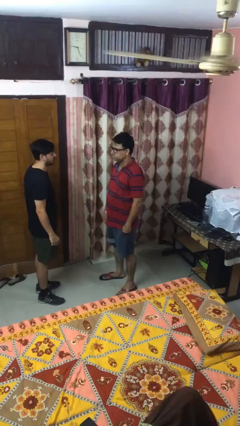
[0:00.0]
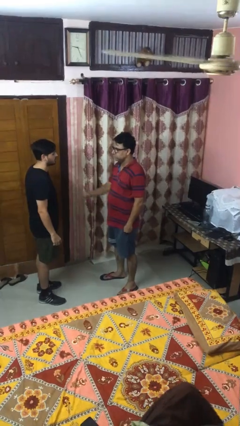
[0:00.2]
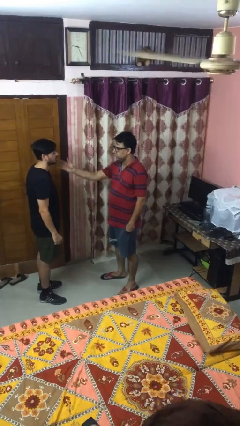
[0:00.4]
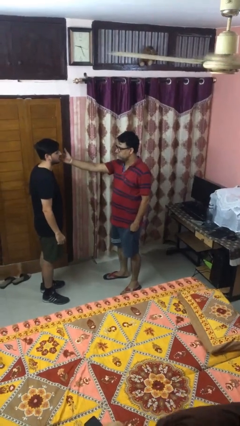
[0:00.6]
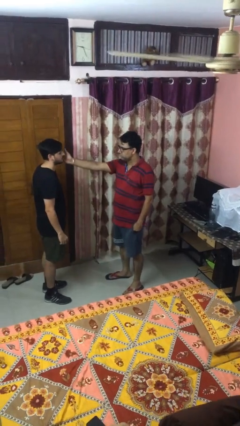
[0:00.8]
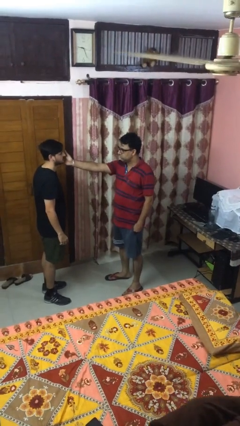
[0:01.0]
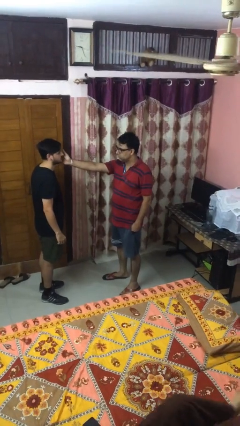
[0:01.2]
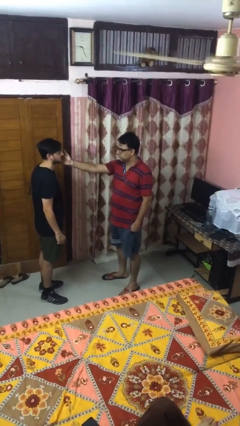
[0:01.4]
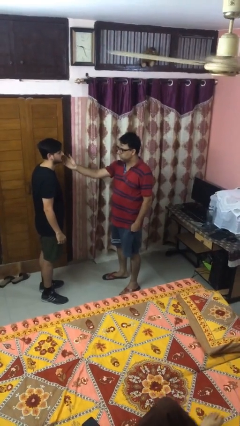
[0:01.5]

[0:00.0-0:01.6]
person touches face of person

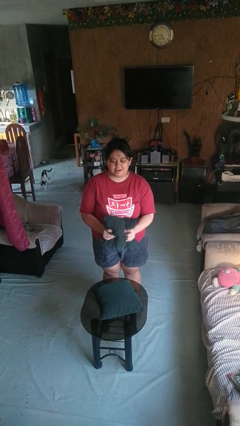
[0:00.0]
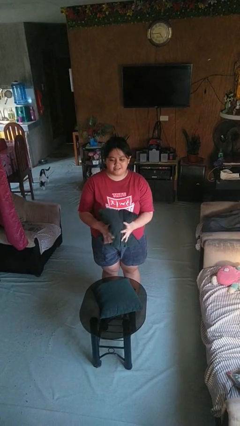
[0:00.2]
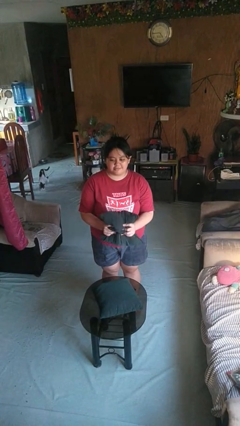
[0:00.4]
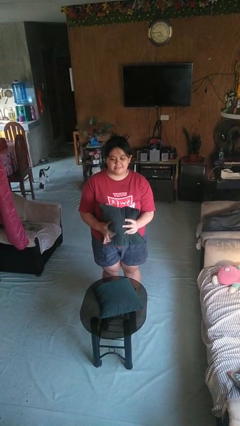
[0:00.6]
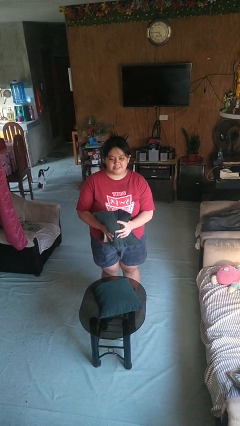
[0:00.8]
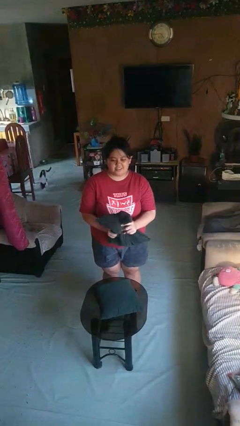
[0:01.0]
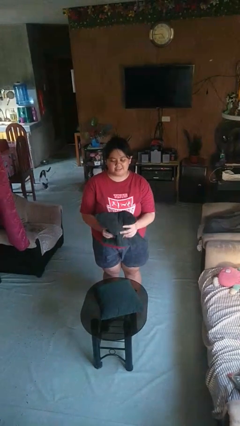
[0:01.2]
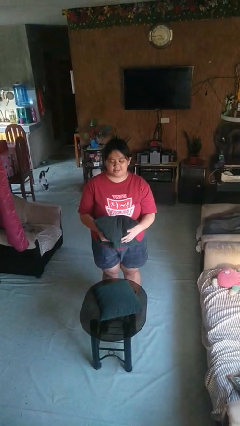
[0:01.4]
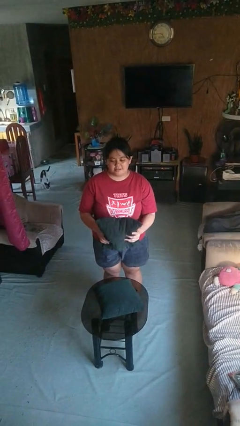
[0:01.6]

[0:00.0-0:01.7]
person squeezes object

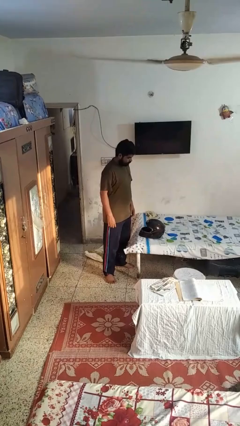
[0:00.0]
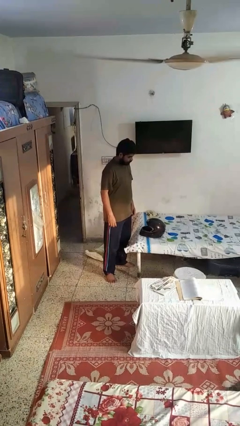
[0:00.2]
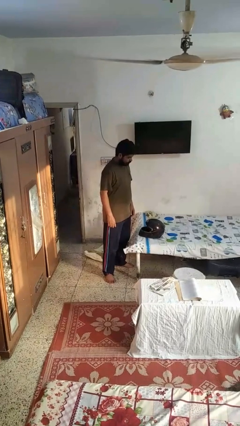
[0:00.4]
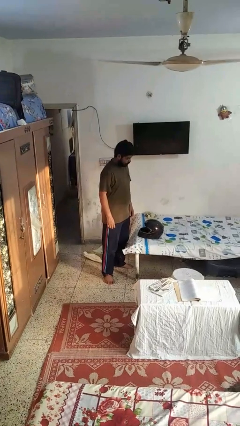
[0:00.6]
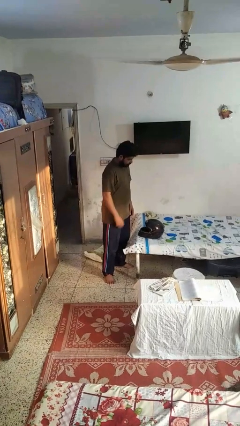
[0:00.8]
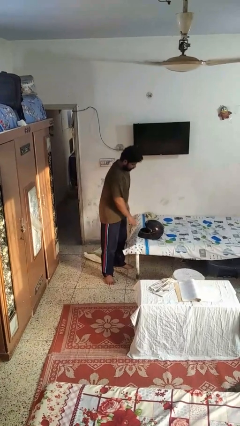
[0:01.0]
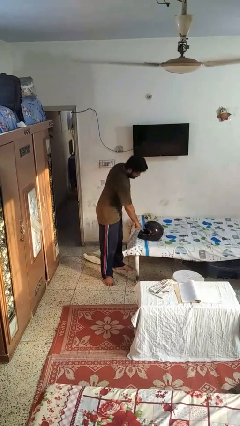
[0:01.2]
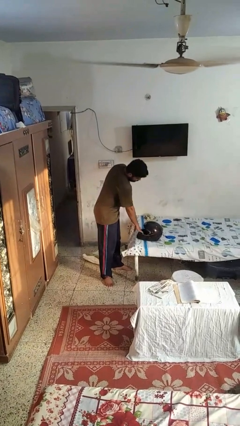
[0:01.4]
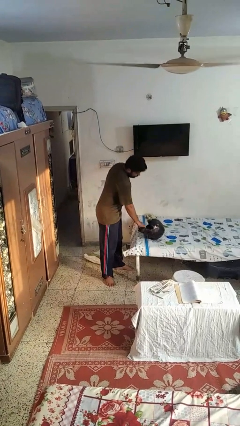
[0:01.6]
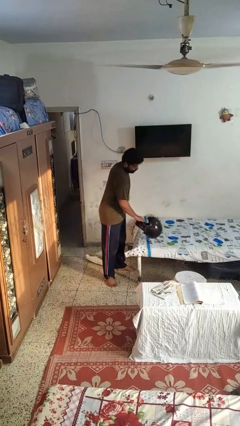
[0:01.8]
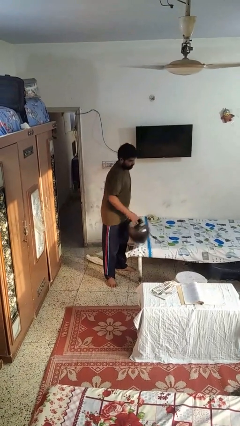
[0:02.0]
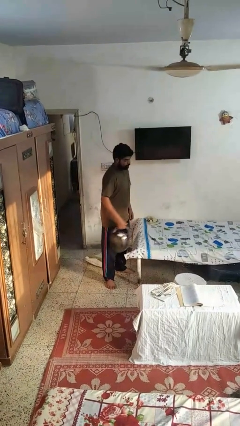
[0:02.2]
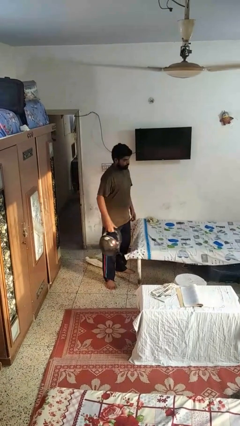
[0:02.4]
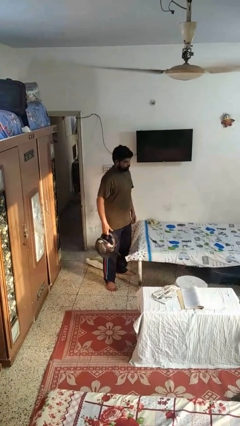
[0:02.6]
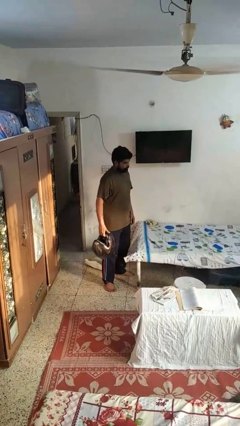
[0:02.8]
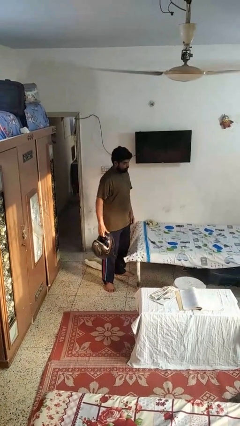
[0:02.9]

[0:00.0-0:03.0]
person picks up object from bed

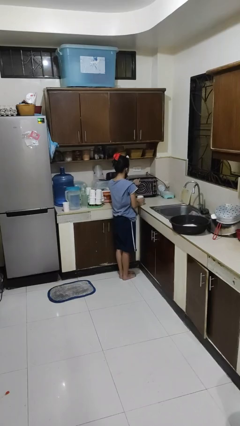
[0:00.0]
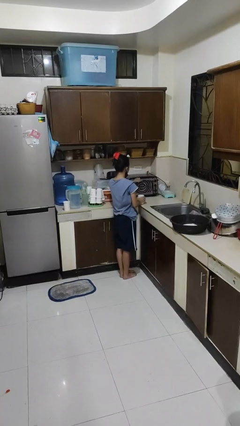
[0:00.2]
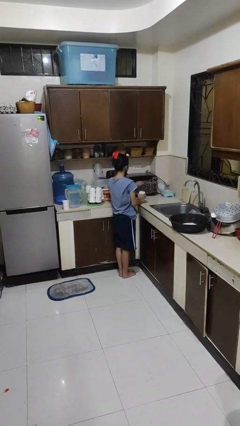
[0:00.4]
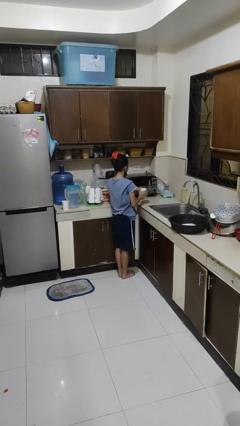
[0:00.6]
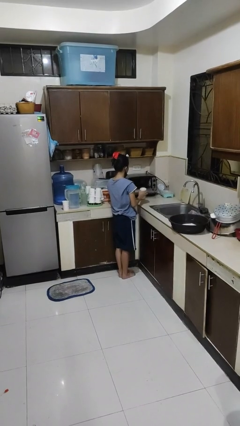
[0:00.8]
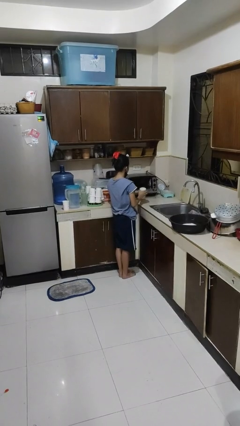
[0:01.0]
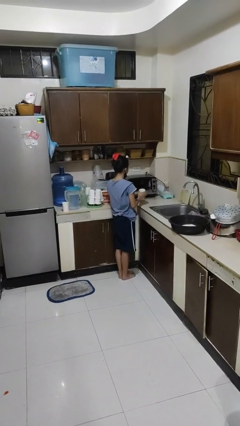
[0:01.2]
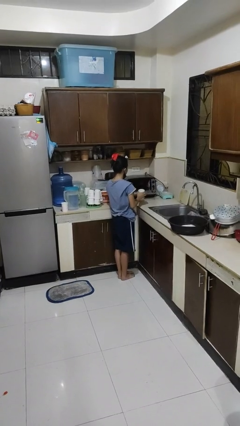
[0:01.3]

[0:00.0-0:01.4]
person opens microwave

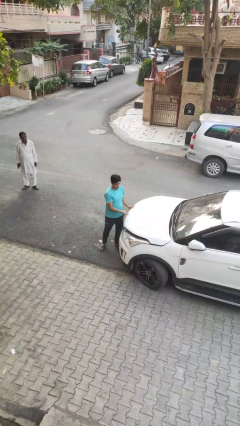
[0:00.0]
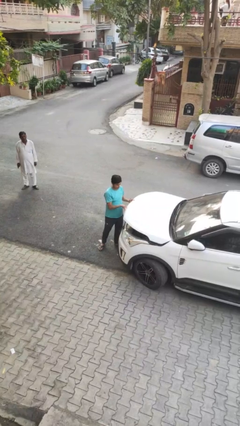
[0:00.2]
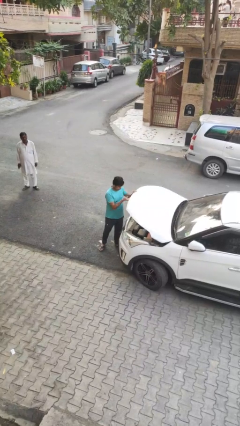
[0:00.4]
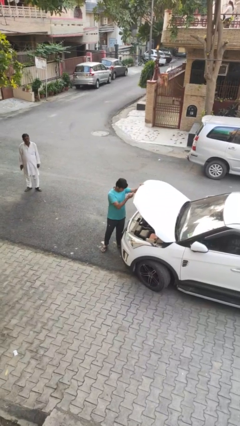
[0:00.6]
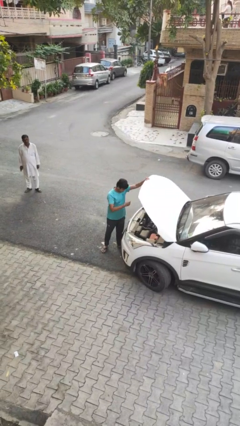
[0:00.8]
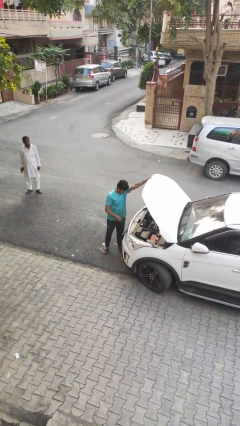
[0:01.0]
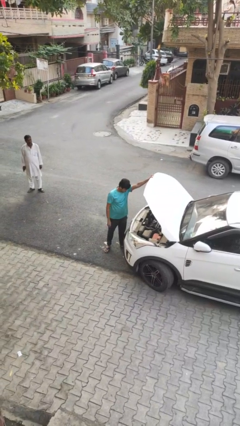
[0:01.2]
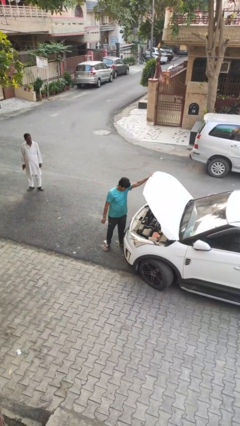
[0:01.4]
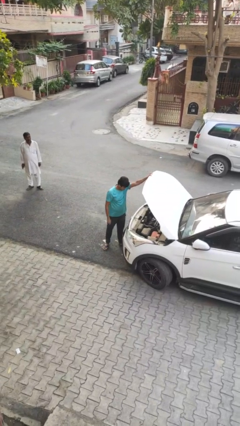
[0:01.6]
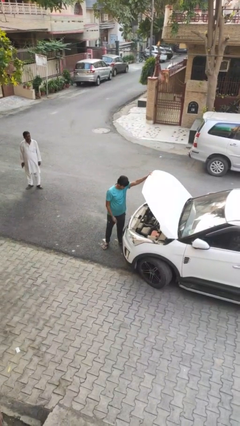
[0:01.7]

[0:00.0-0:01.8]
person opens car hood

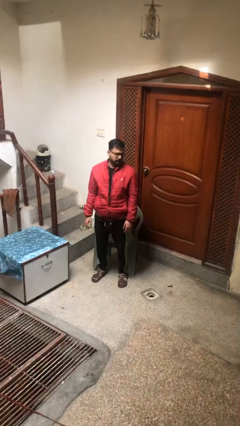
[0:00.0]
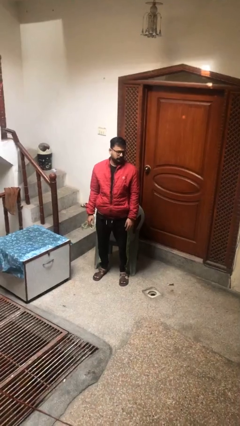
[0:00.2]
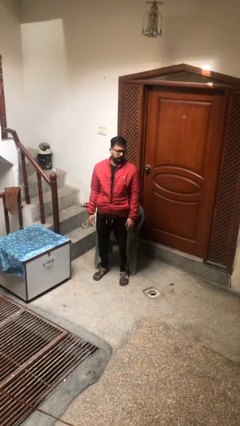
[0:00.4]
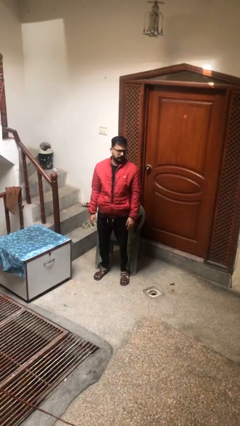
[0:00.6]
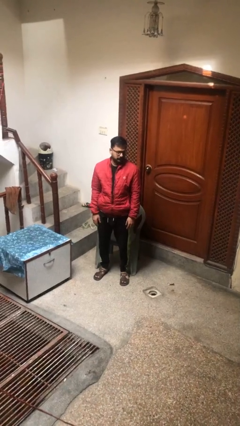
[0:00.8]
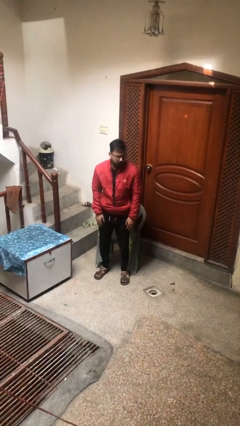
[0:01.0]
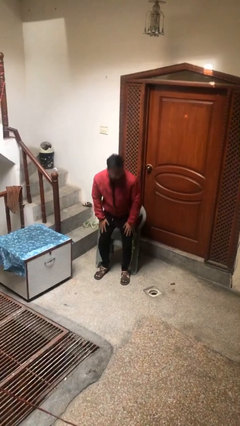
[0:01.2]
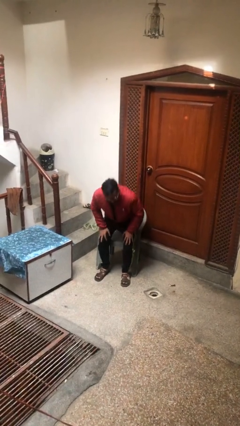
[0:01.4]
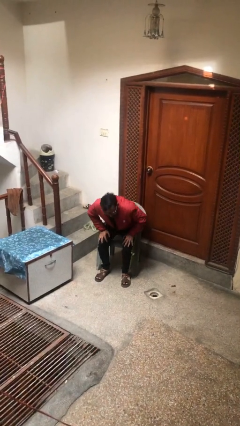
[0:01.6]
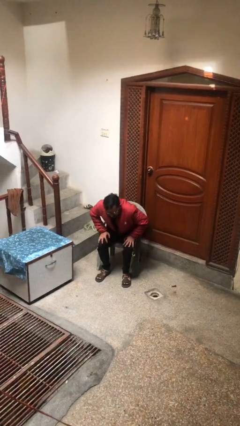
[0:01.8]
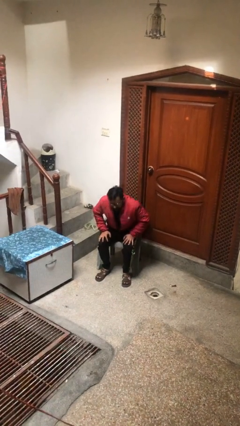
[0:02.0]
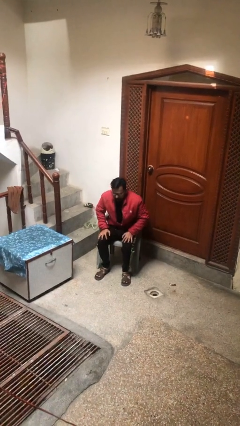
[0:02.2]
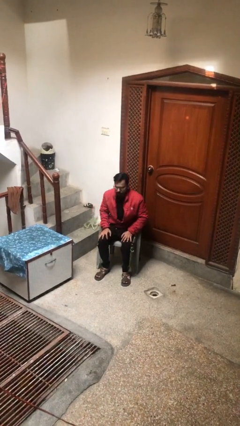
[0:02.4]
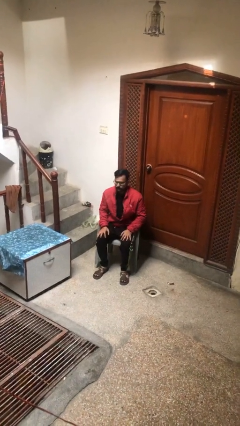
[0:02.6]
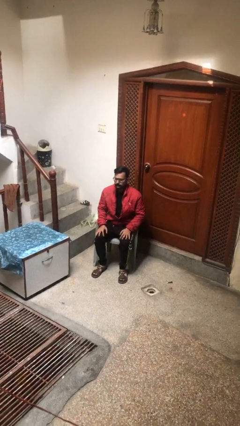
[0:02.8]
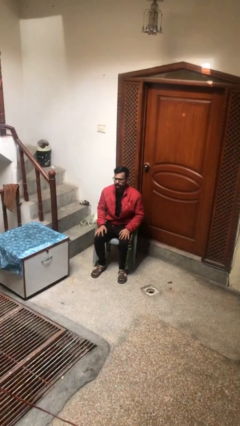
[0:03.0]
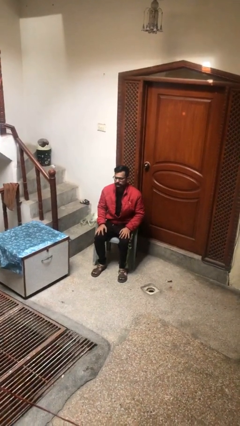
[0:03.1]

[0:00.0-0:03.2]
person sits down

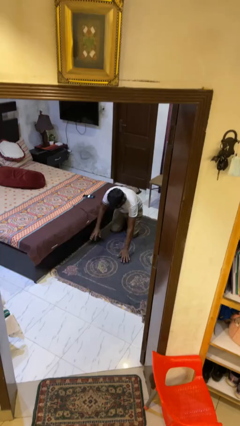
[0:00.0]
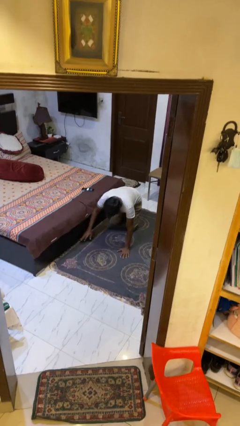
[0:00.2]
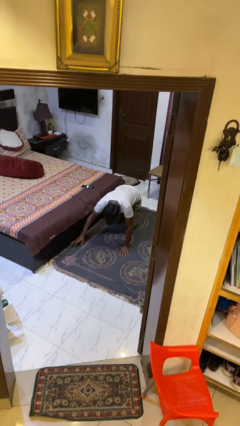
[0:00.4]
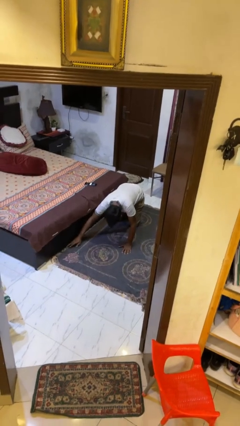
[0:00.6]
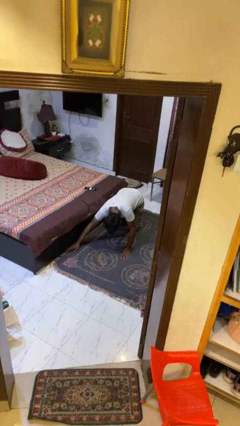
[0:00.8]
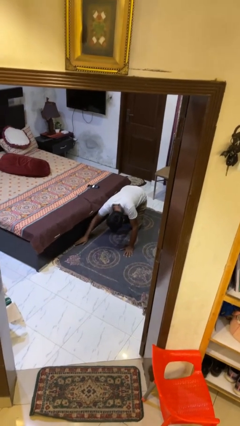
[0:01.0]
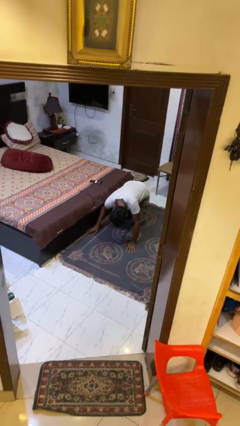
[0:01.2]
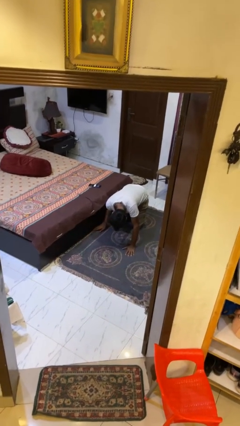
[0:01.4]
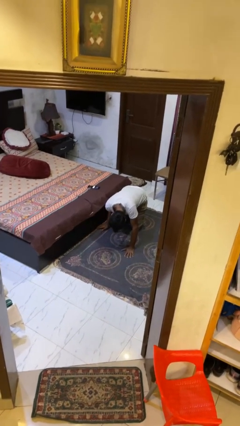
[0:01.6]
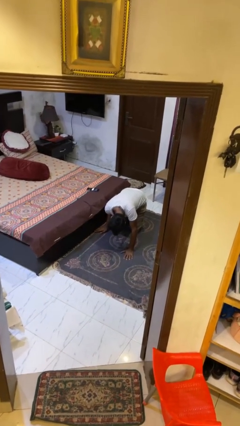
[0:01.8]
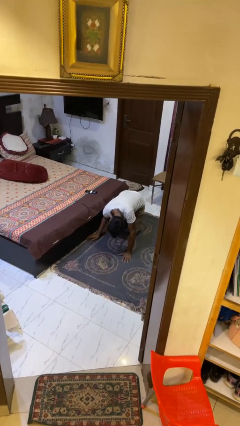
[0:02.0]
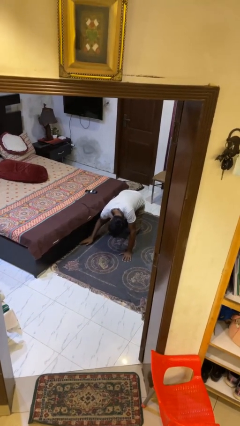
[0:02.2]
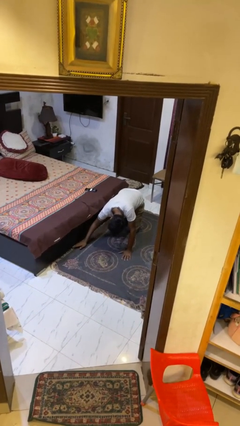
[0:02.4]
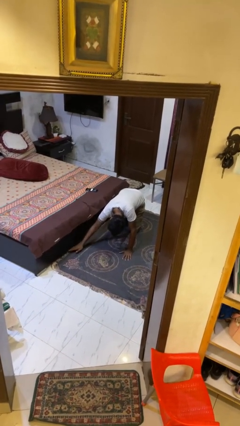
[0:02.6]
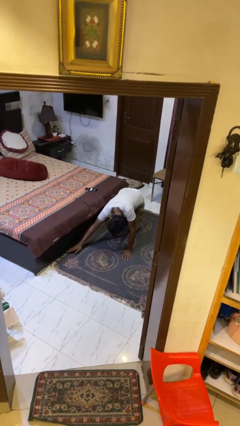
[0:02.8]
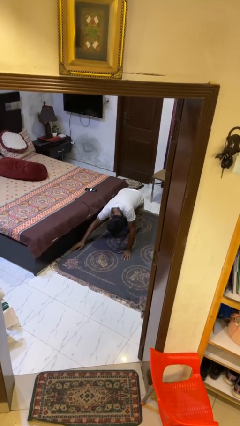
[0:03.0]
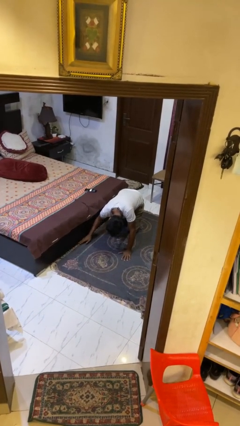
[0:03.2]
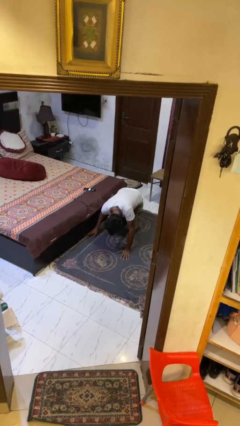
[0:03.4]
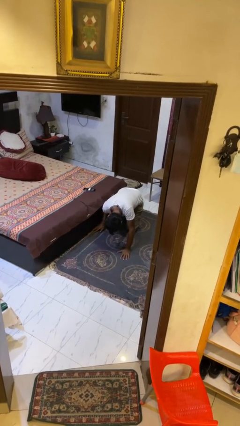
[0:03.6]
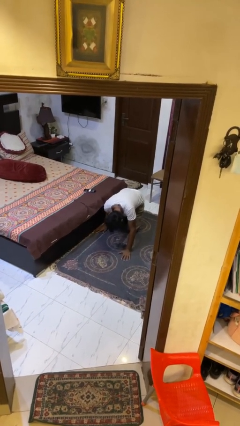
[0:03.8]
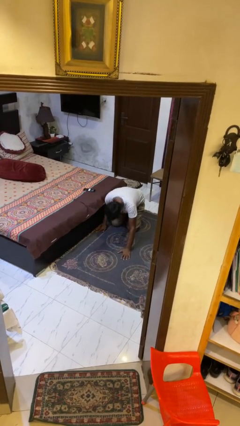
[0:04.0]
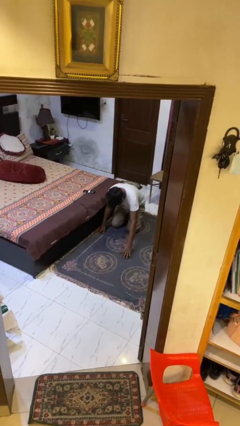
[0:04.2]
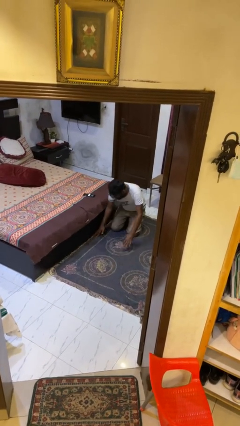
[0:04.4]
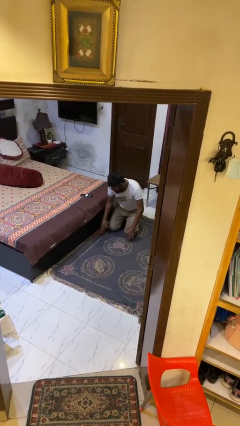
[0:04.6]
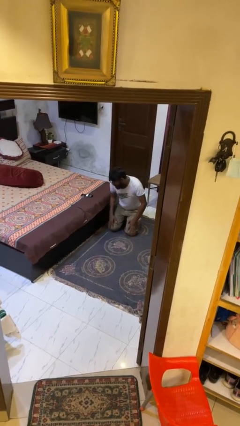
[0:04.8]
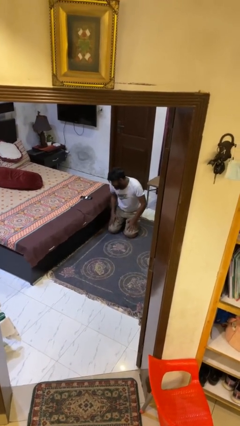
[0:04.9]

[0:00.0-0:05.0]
person searches under bed
